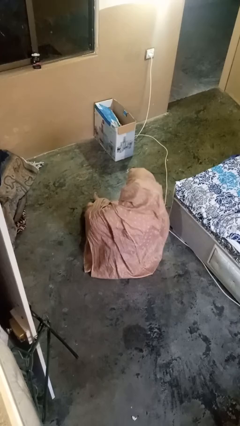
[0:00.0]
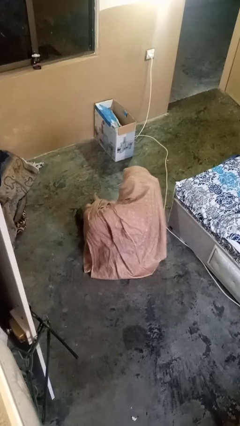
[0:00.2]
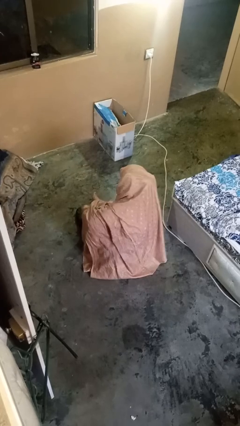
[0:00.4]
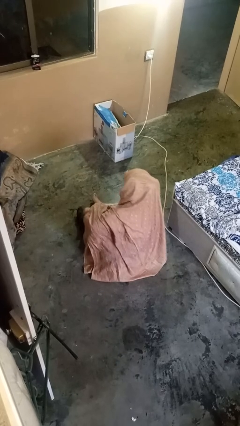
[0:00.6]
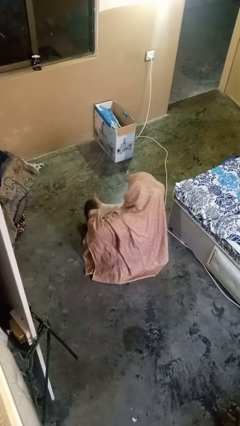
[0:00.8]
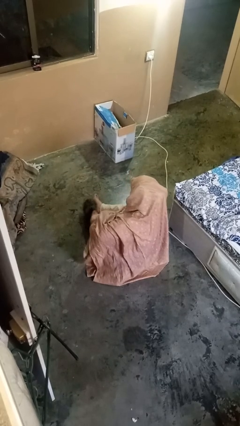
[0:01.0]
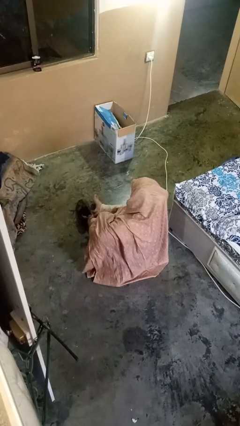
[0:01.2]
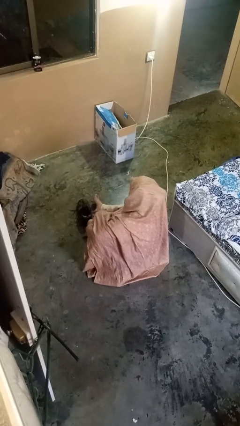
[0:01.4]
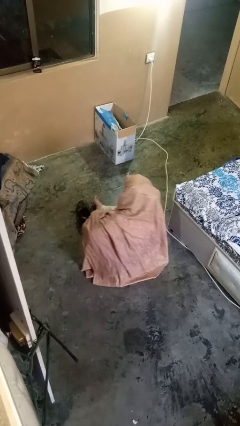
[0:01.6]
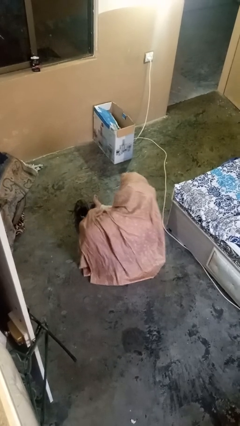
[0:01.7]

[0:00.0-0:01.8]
person takes off shoes

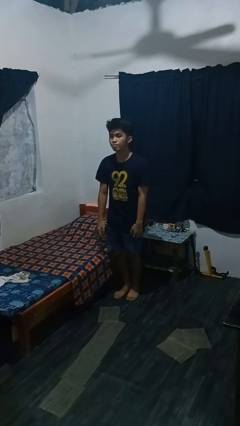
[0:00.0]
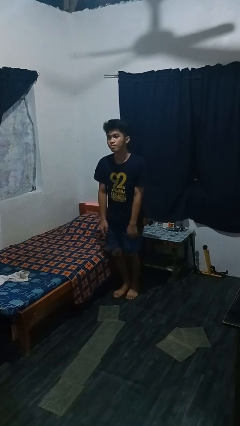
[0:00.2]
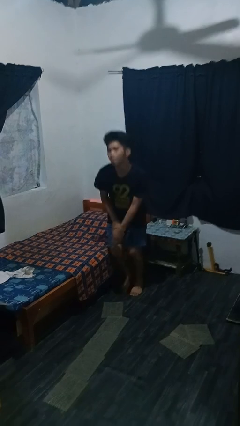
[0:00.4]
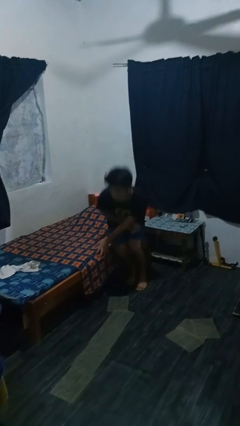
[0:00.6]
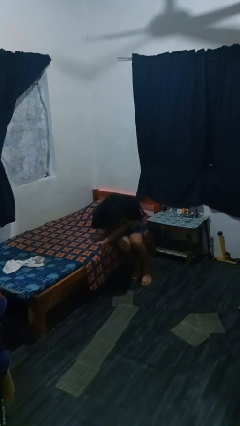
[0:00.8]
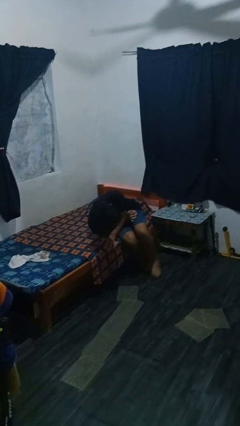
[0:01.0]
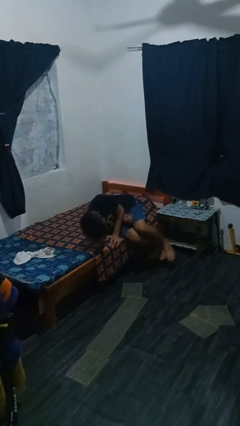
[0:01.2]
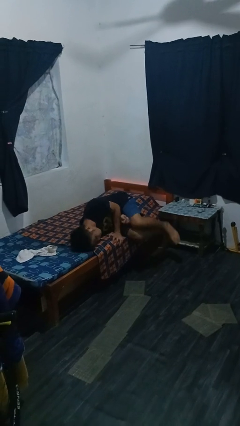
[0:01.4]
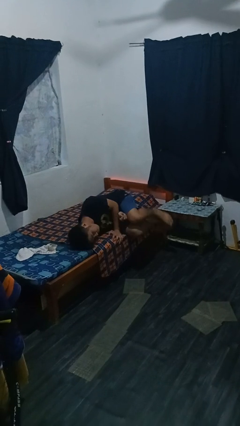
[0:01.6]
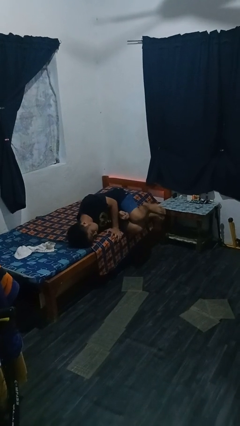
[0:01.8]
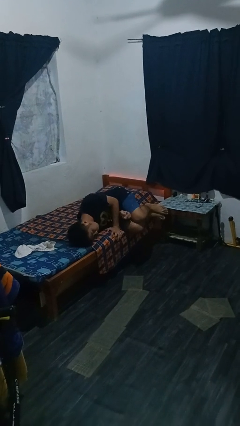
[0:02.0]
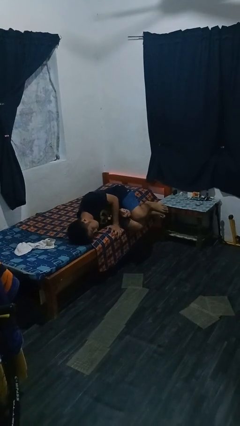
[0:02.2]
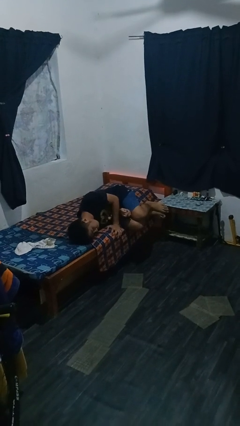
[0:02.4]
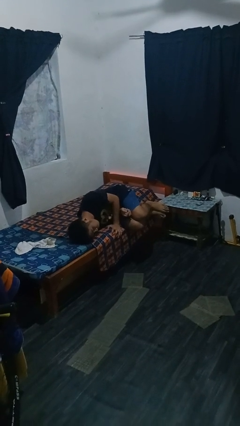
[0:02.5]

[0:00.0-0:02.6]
person lies down on bed

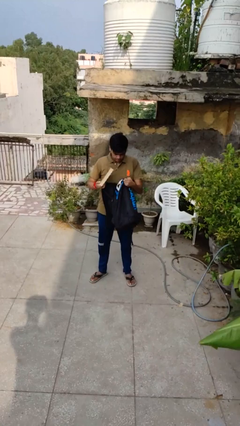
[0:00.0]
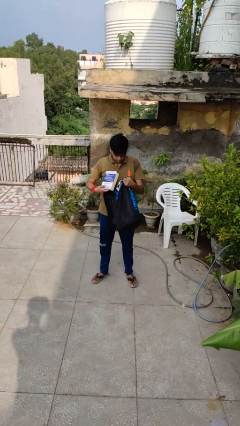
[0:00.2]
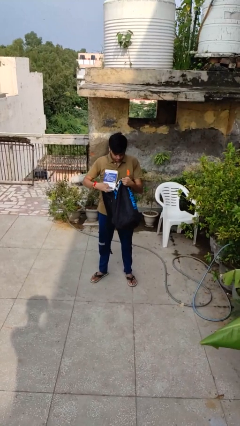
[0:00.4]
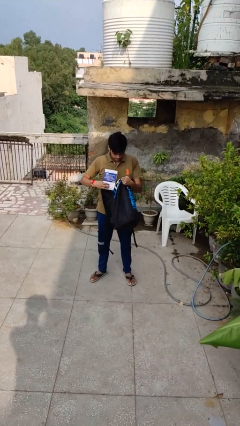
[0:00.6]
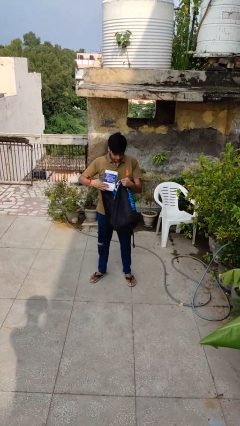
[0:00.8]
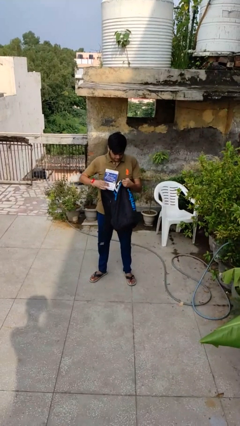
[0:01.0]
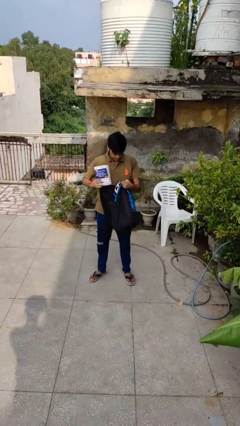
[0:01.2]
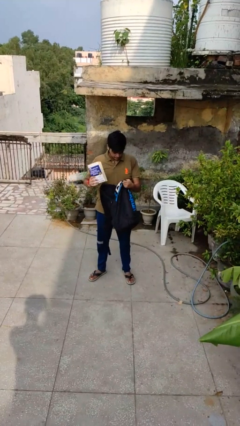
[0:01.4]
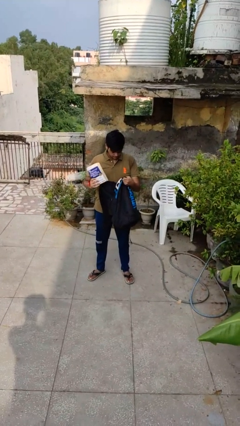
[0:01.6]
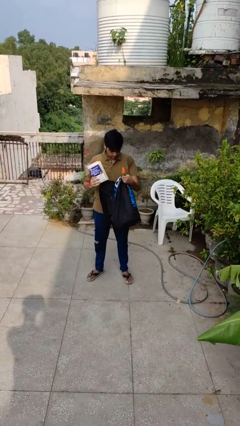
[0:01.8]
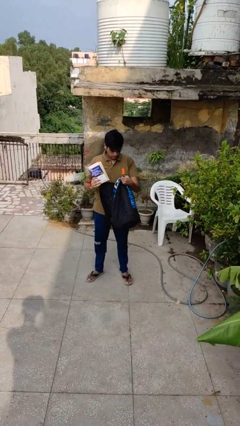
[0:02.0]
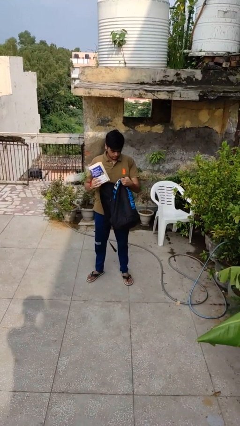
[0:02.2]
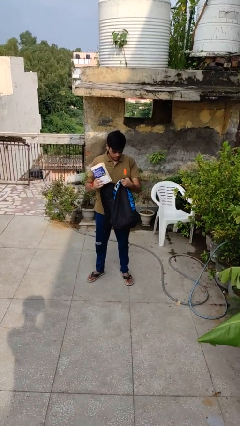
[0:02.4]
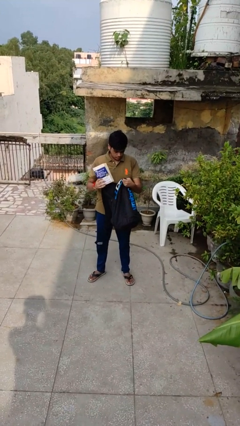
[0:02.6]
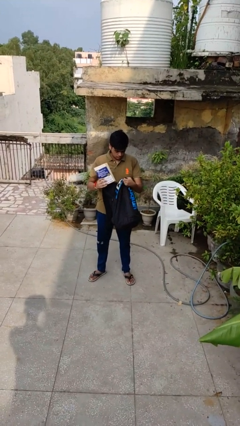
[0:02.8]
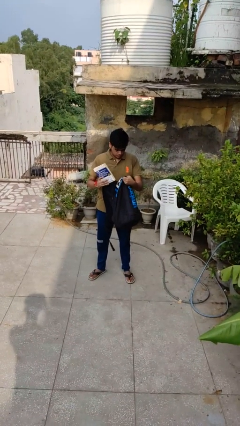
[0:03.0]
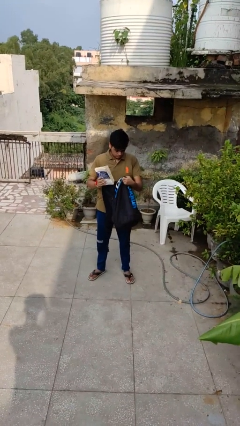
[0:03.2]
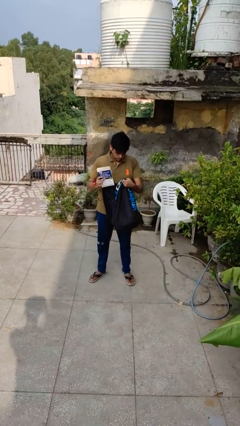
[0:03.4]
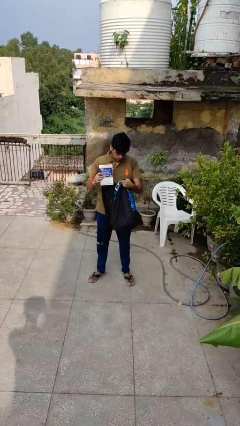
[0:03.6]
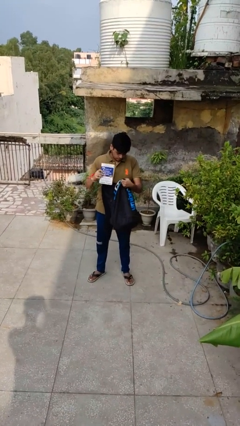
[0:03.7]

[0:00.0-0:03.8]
person takes object from backpack

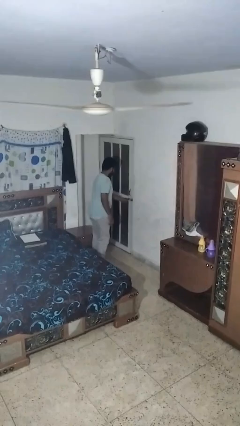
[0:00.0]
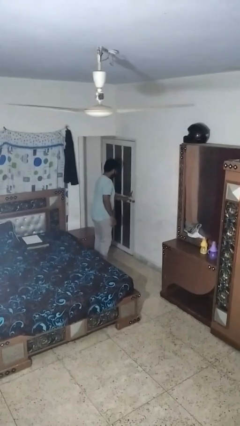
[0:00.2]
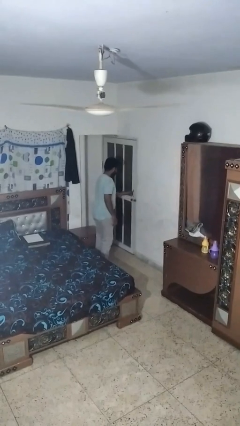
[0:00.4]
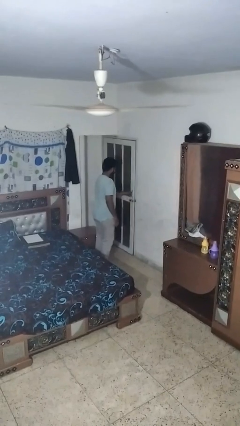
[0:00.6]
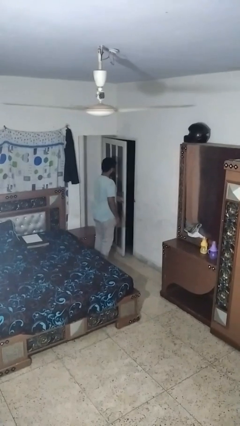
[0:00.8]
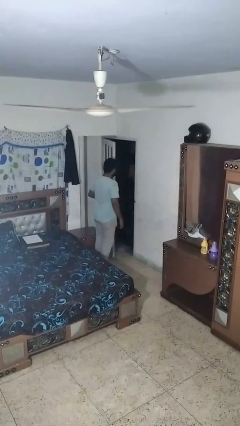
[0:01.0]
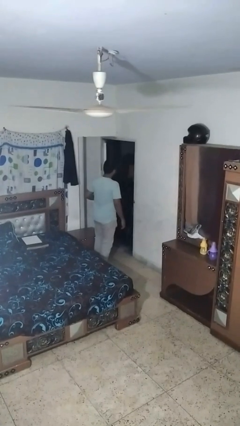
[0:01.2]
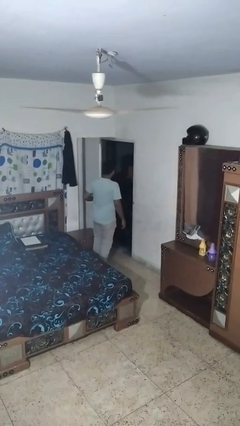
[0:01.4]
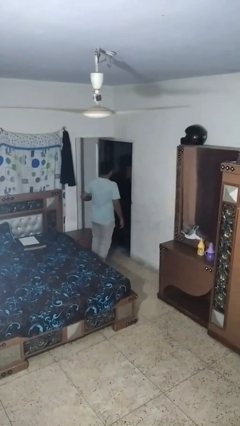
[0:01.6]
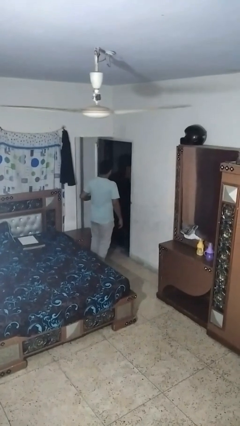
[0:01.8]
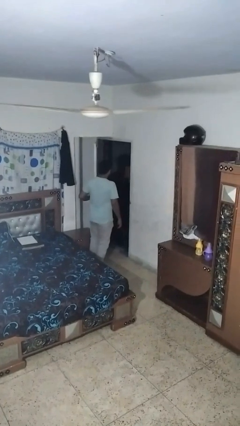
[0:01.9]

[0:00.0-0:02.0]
person opens facility door

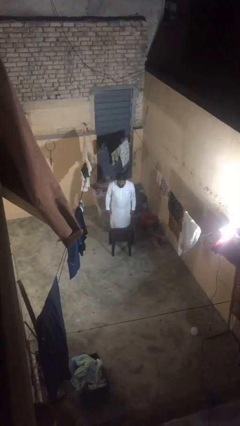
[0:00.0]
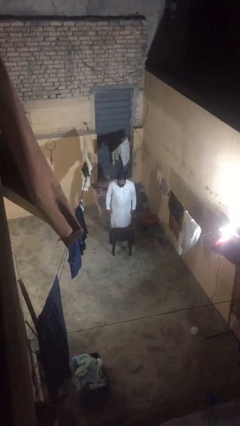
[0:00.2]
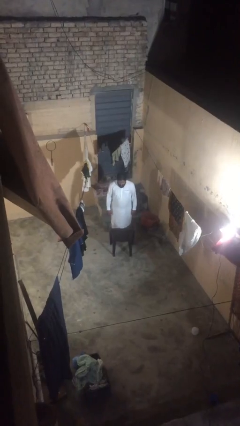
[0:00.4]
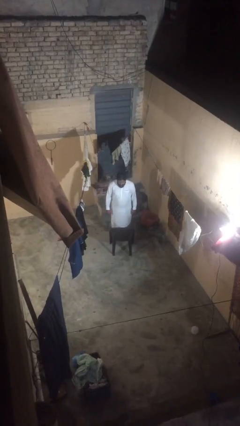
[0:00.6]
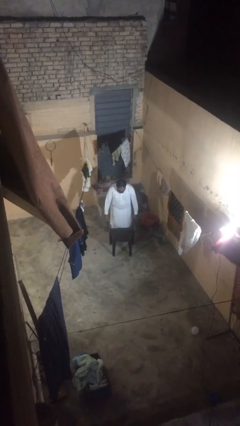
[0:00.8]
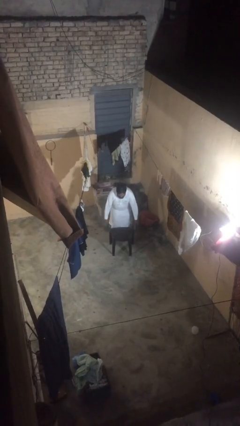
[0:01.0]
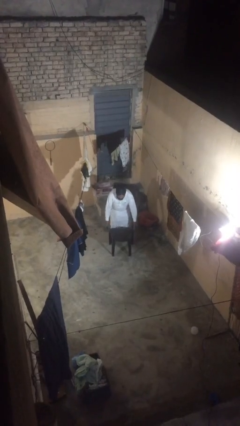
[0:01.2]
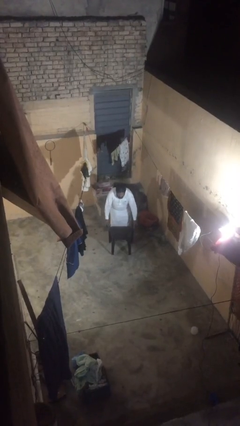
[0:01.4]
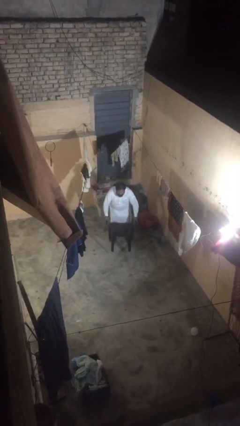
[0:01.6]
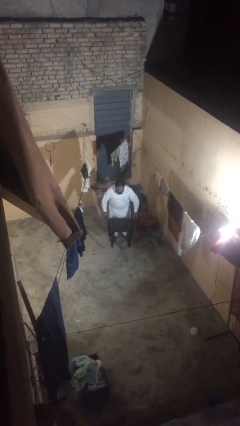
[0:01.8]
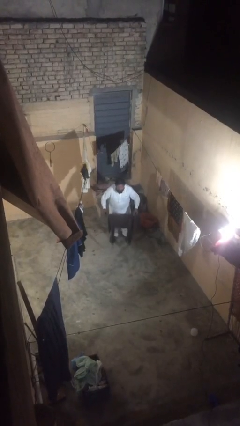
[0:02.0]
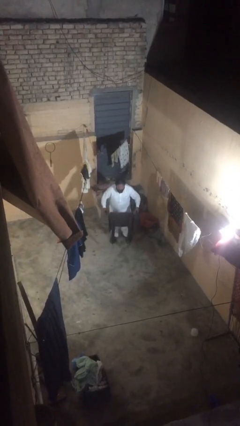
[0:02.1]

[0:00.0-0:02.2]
person picks up object from floor

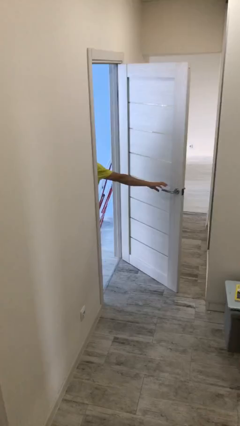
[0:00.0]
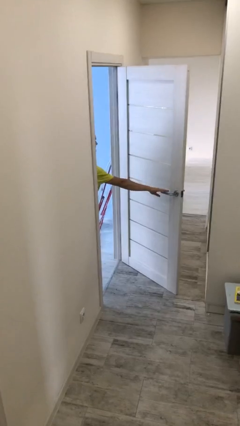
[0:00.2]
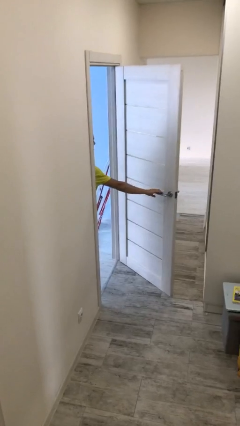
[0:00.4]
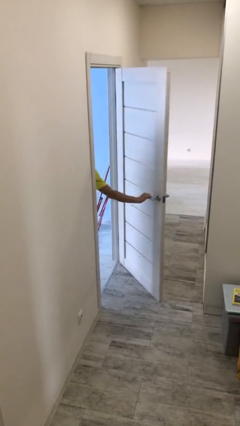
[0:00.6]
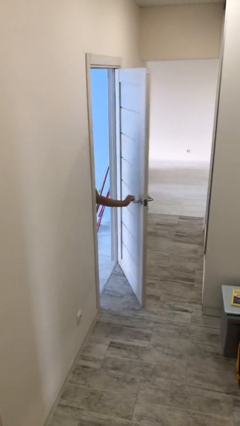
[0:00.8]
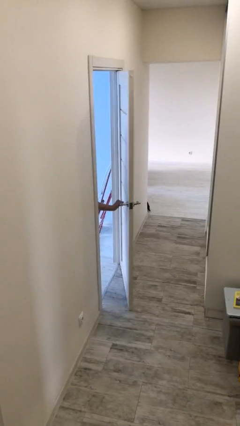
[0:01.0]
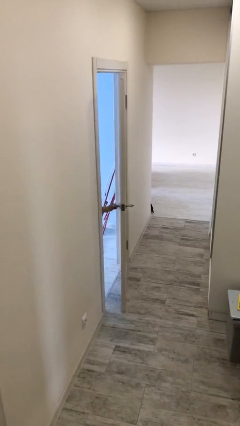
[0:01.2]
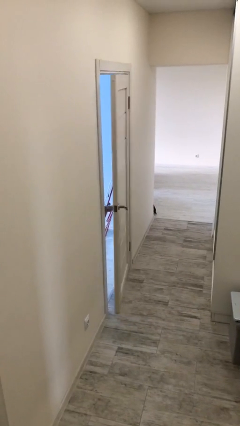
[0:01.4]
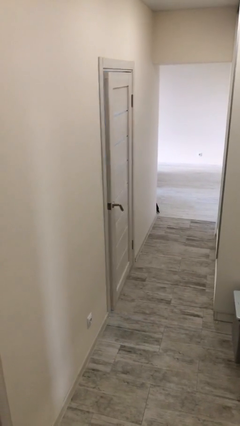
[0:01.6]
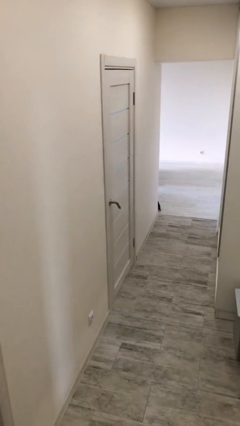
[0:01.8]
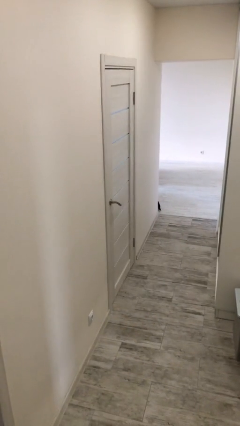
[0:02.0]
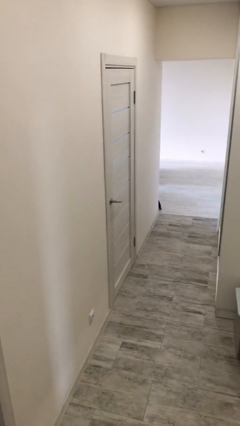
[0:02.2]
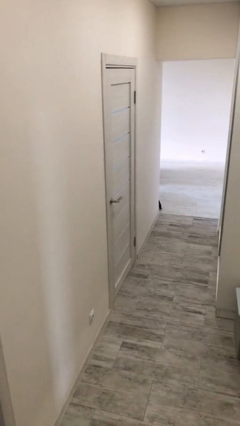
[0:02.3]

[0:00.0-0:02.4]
person closes facility door

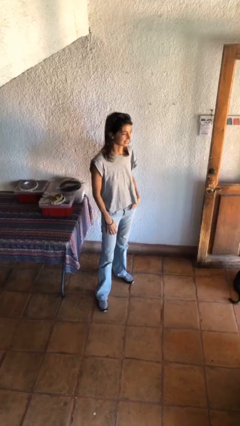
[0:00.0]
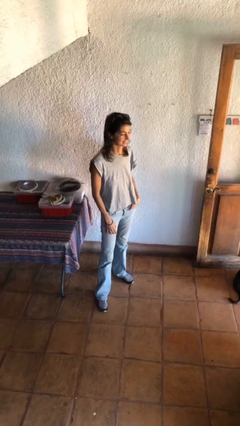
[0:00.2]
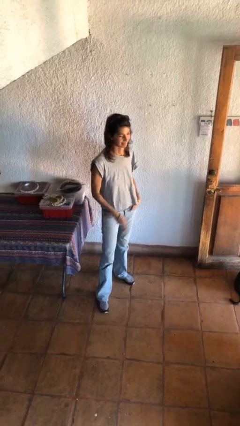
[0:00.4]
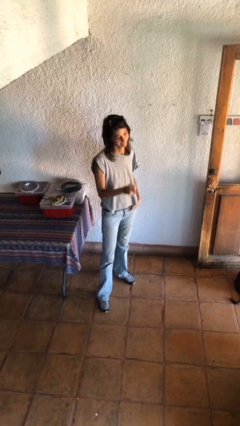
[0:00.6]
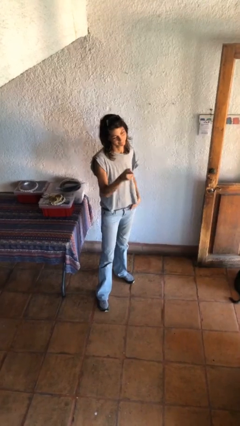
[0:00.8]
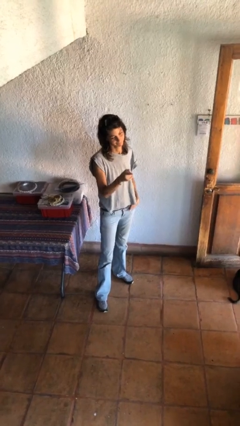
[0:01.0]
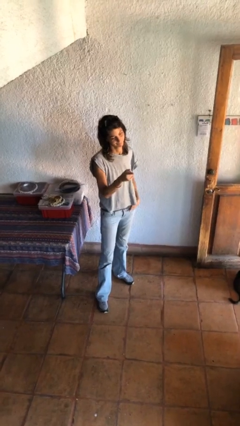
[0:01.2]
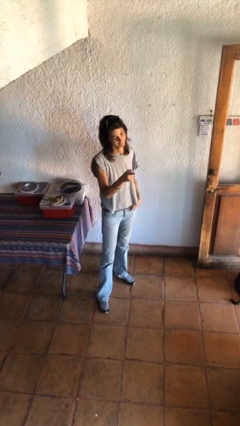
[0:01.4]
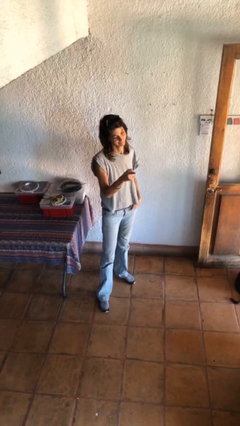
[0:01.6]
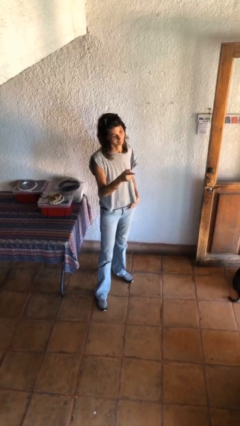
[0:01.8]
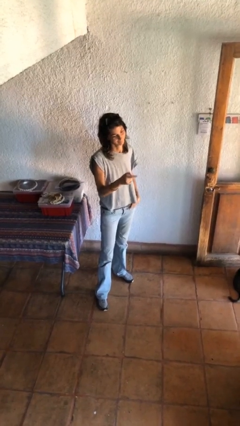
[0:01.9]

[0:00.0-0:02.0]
person points at person

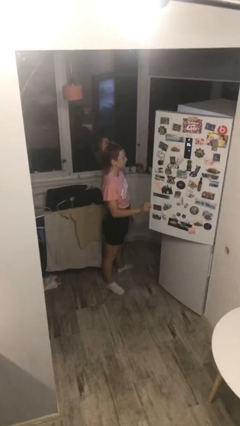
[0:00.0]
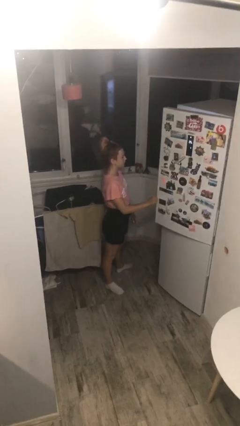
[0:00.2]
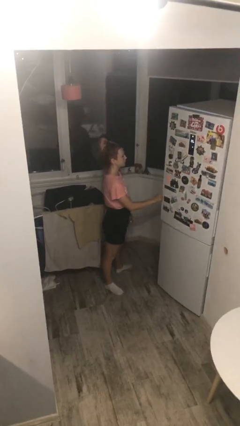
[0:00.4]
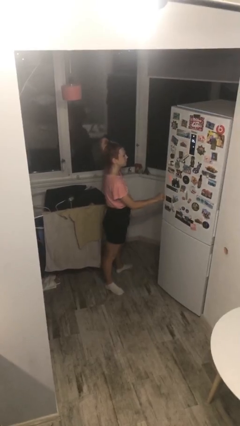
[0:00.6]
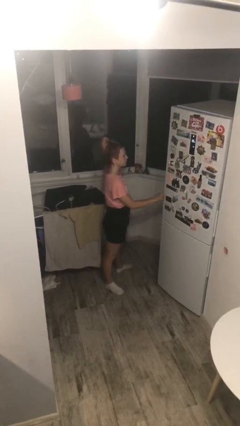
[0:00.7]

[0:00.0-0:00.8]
person closes refrigerator
